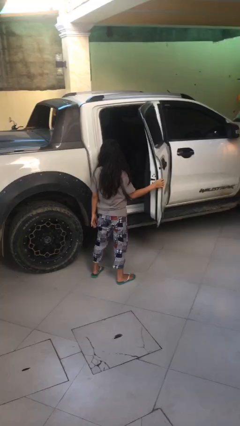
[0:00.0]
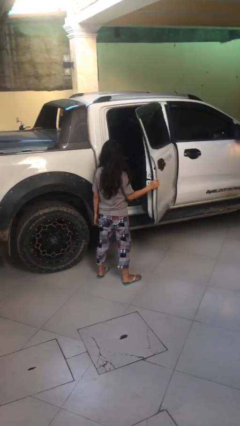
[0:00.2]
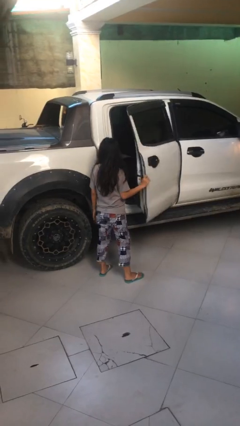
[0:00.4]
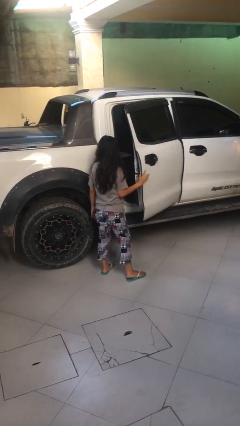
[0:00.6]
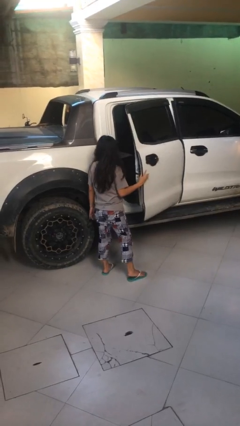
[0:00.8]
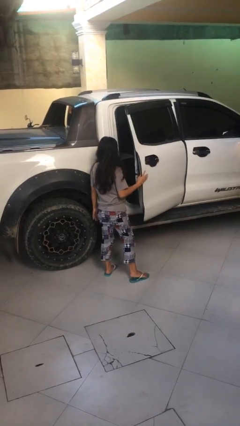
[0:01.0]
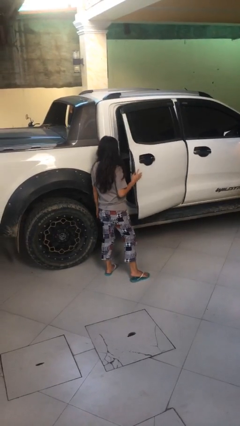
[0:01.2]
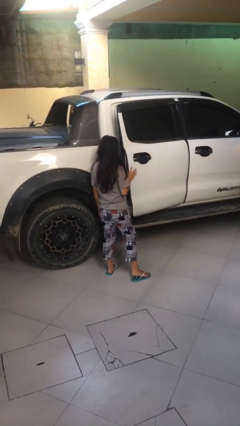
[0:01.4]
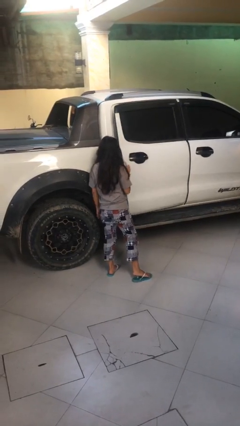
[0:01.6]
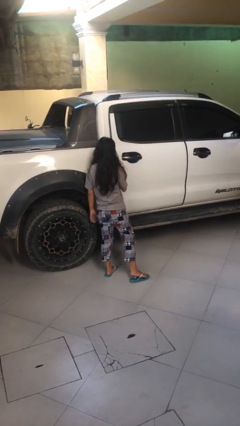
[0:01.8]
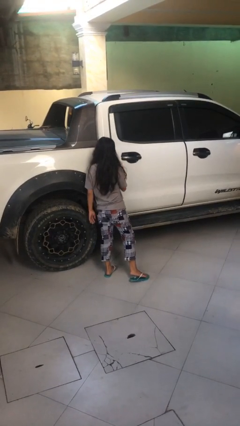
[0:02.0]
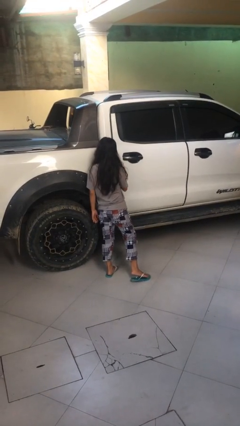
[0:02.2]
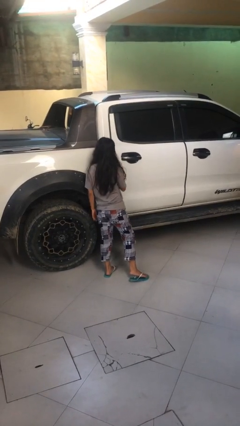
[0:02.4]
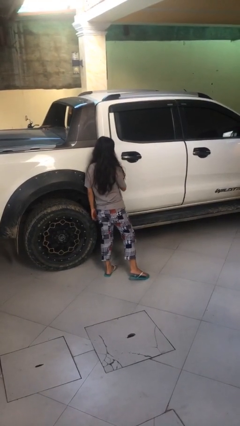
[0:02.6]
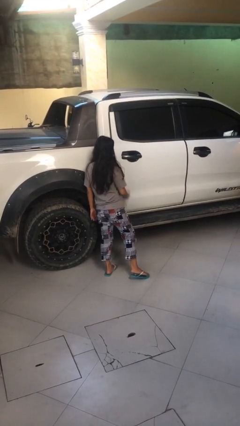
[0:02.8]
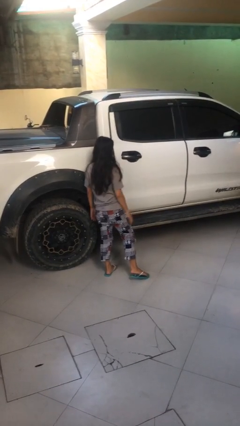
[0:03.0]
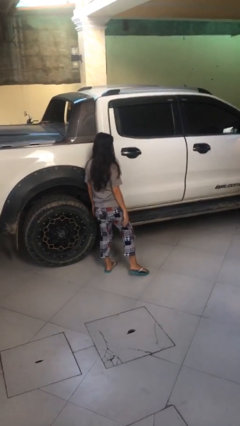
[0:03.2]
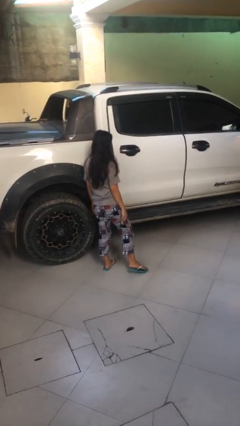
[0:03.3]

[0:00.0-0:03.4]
person closes car door

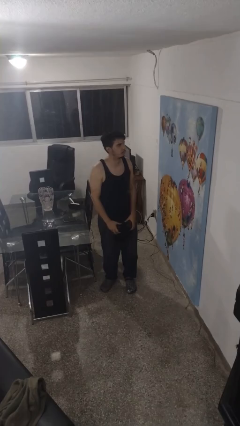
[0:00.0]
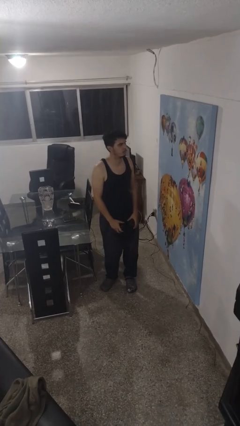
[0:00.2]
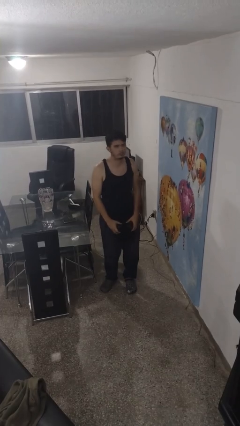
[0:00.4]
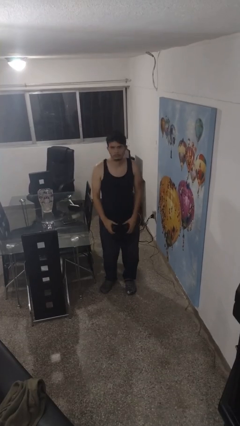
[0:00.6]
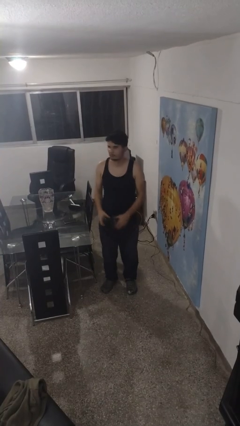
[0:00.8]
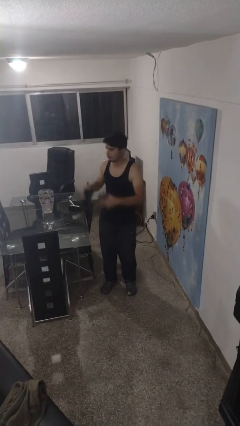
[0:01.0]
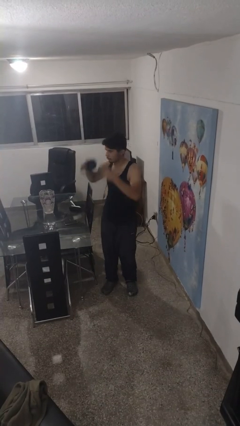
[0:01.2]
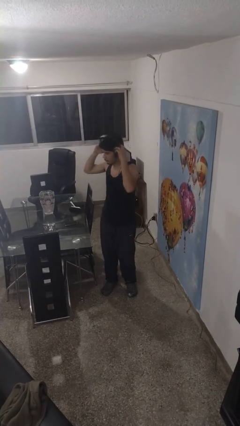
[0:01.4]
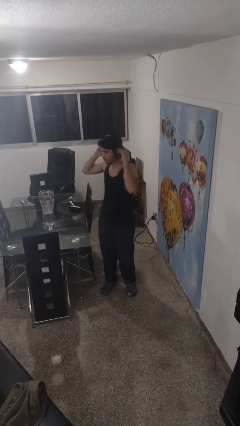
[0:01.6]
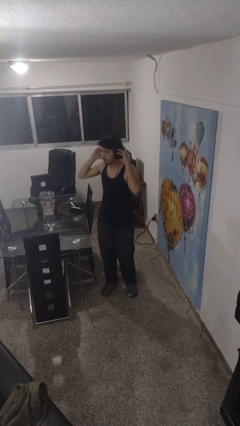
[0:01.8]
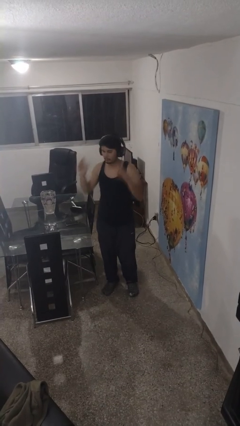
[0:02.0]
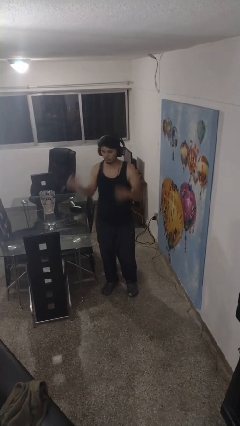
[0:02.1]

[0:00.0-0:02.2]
person puts on headphones

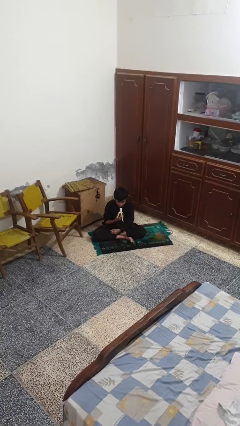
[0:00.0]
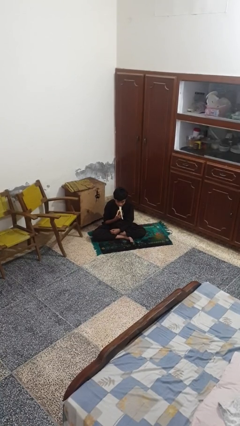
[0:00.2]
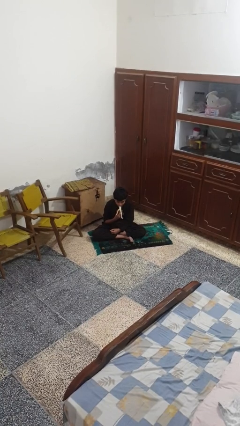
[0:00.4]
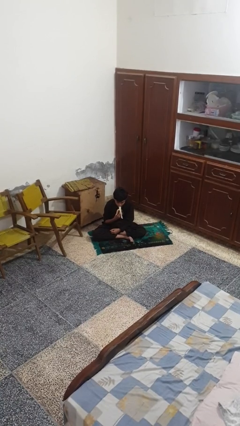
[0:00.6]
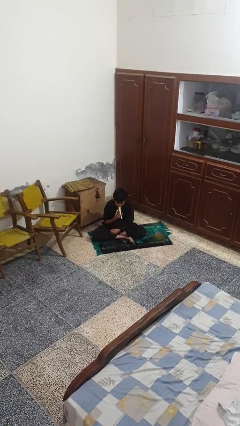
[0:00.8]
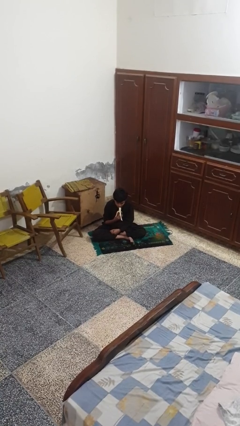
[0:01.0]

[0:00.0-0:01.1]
person eats banana

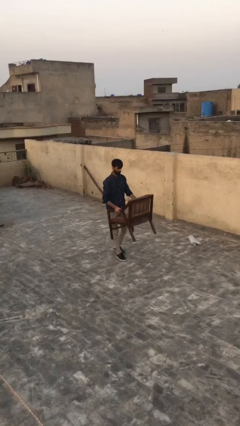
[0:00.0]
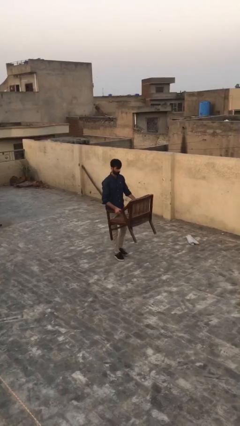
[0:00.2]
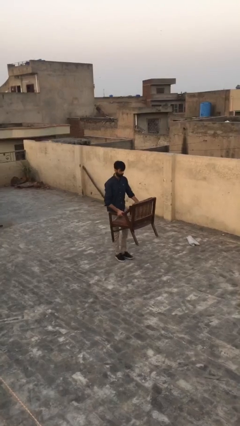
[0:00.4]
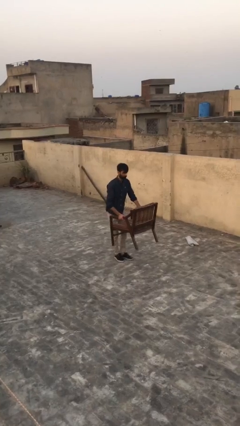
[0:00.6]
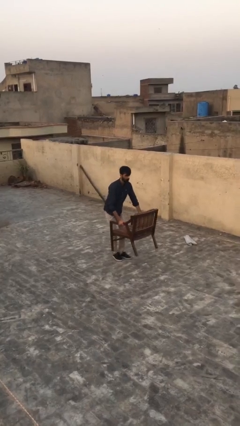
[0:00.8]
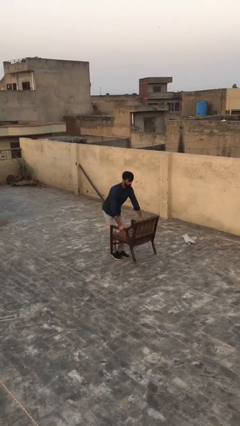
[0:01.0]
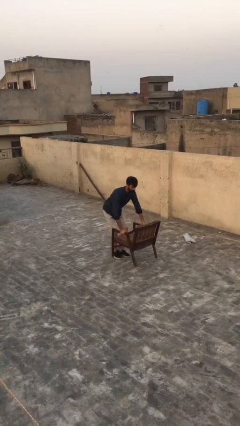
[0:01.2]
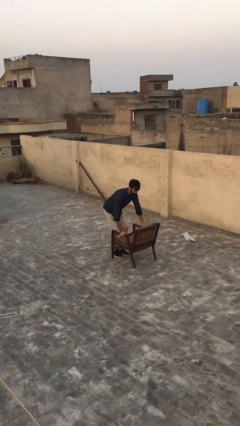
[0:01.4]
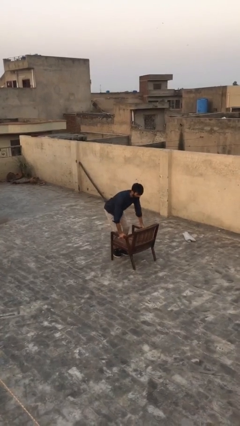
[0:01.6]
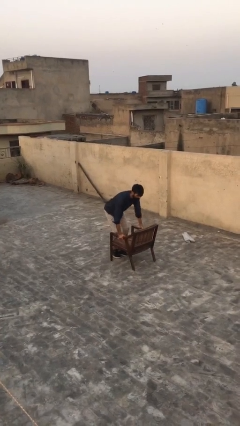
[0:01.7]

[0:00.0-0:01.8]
person puts down object on floor

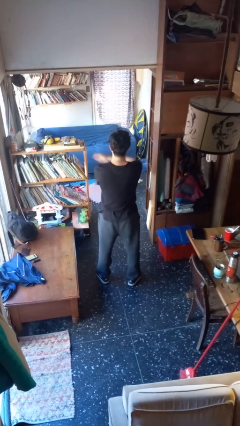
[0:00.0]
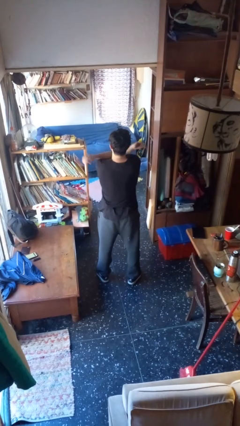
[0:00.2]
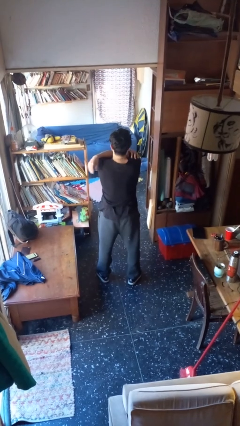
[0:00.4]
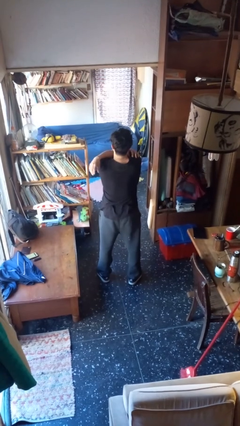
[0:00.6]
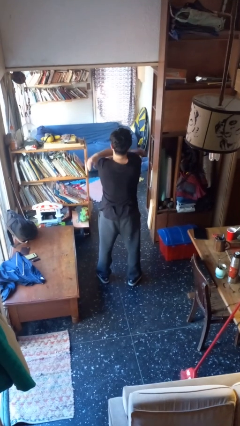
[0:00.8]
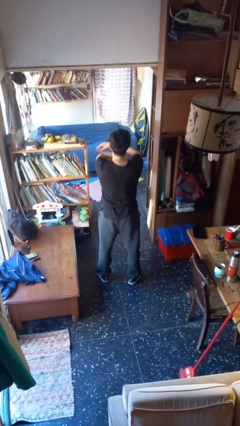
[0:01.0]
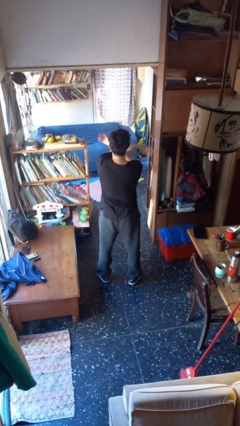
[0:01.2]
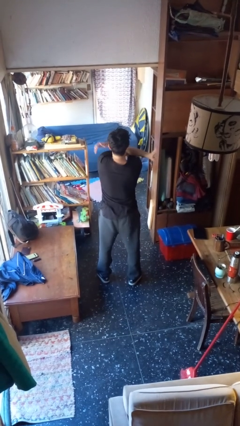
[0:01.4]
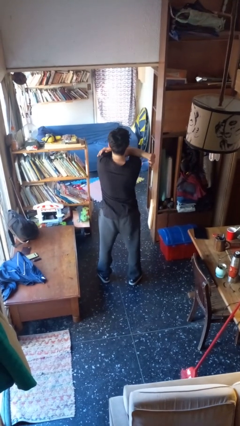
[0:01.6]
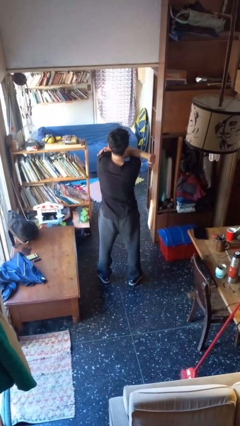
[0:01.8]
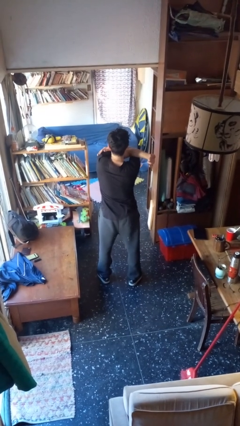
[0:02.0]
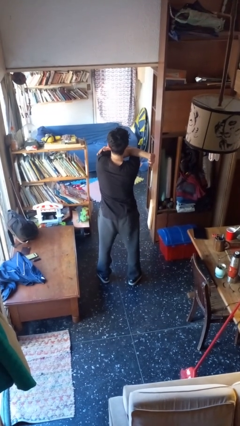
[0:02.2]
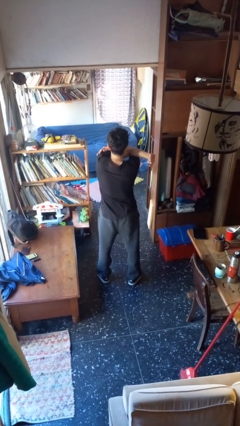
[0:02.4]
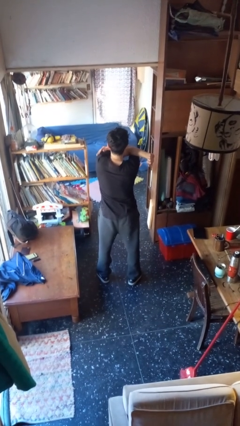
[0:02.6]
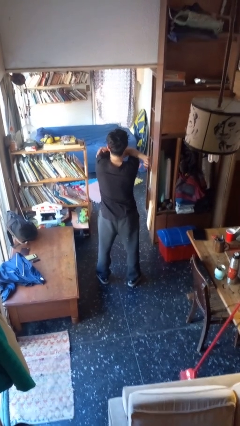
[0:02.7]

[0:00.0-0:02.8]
person stretches arms to side

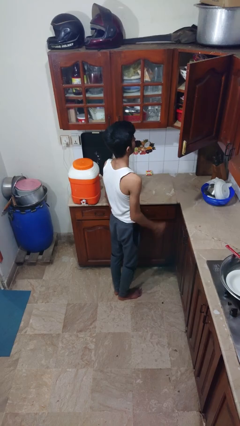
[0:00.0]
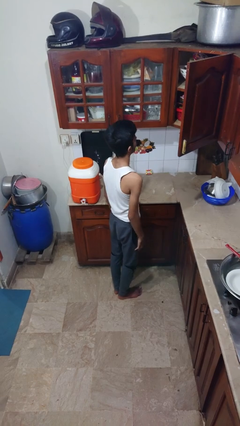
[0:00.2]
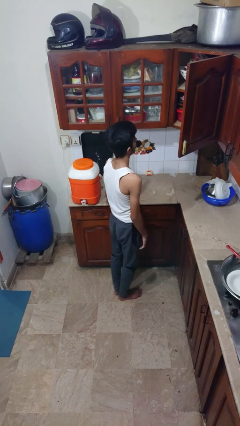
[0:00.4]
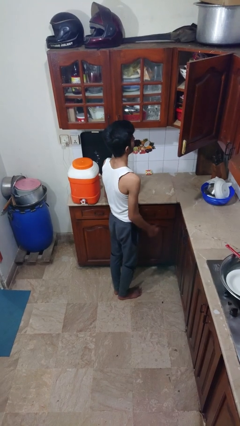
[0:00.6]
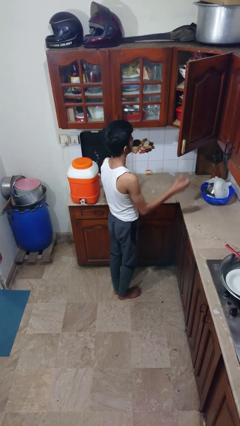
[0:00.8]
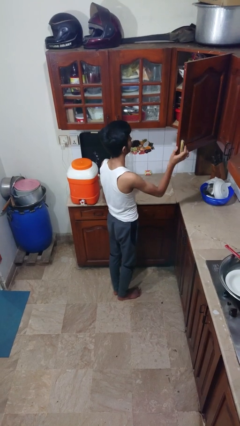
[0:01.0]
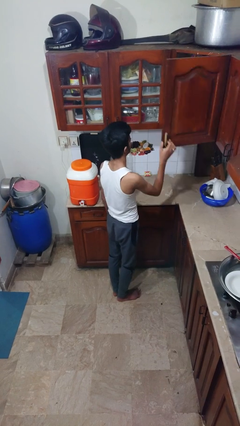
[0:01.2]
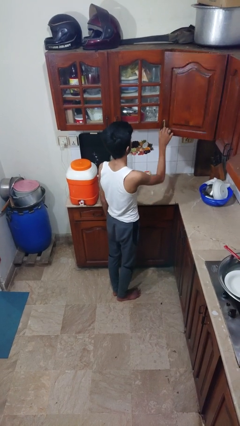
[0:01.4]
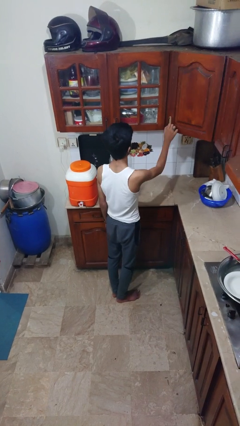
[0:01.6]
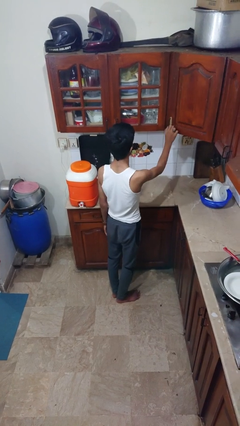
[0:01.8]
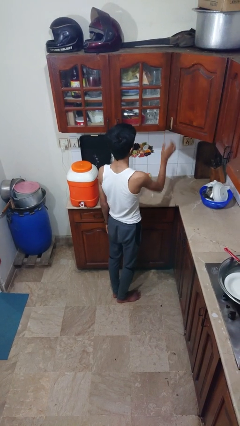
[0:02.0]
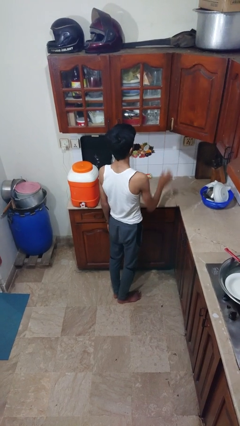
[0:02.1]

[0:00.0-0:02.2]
person closes cabinet

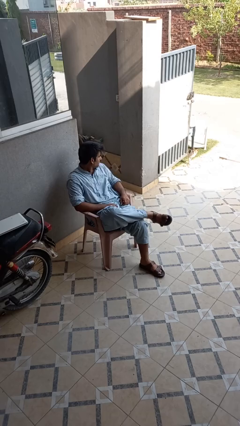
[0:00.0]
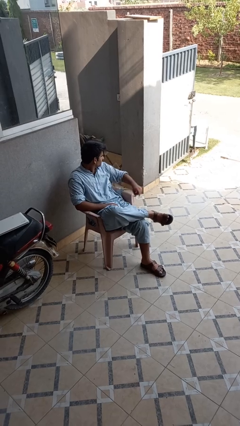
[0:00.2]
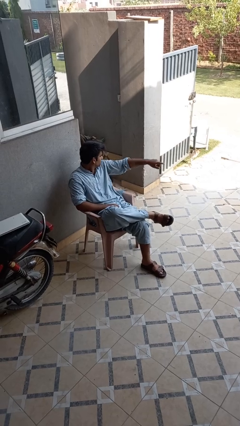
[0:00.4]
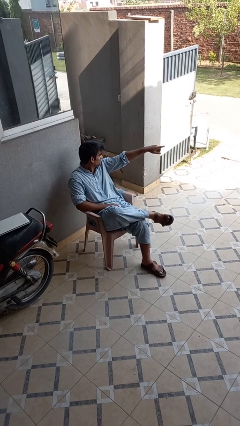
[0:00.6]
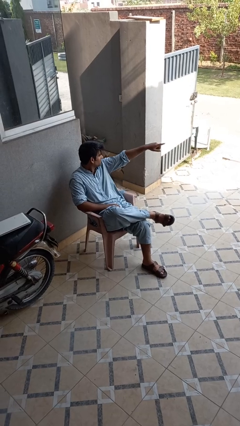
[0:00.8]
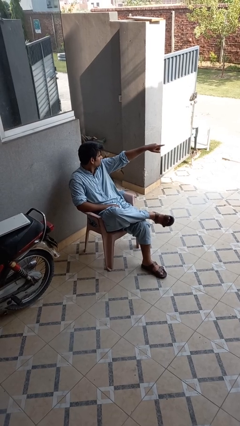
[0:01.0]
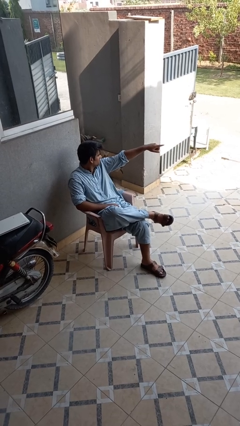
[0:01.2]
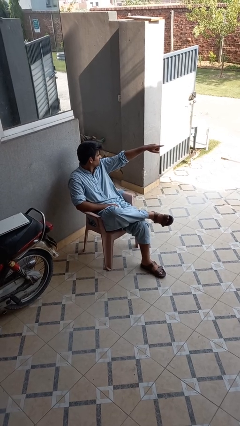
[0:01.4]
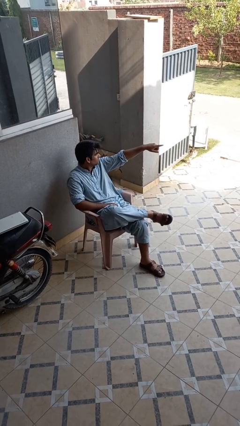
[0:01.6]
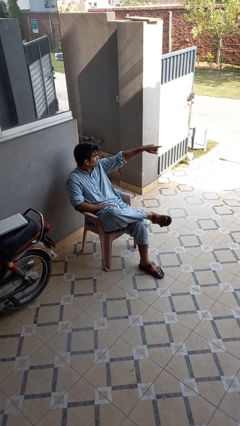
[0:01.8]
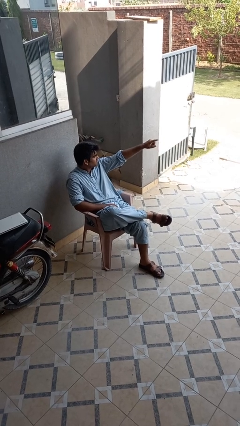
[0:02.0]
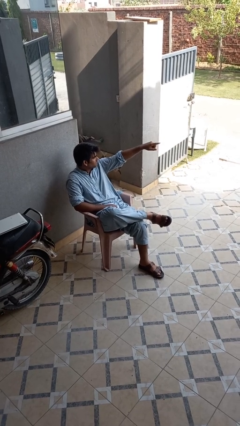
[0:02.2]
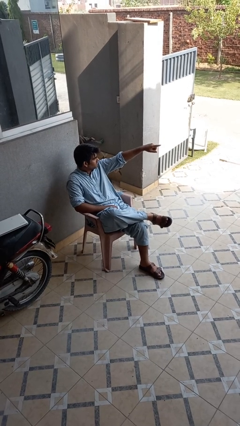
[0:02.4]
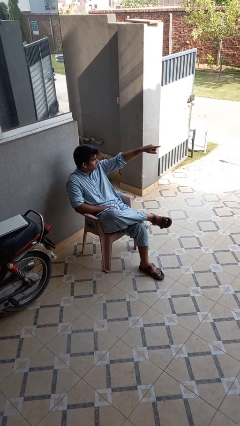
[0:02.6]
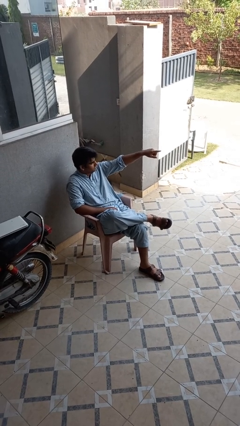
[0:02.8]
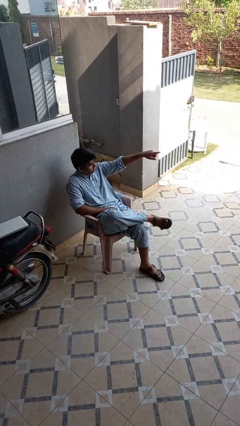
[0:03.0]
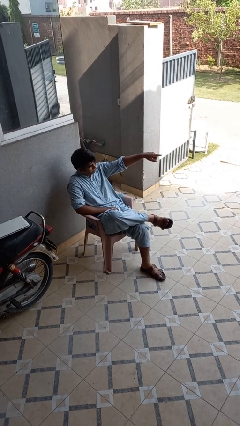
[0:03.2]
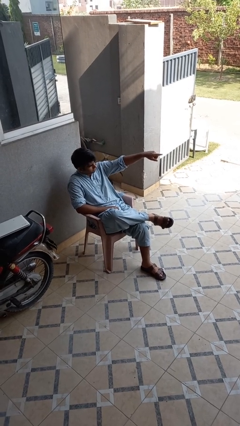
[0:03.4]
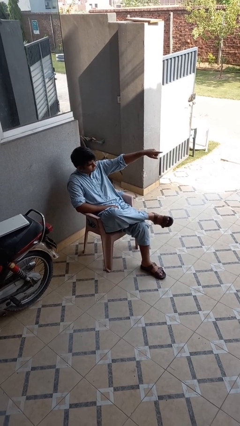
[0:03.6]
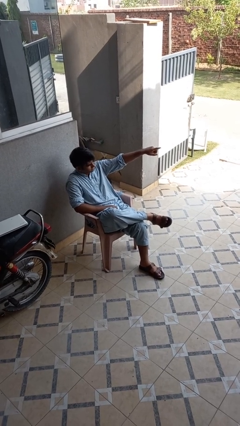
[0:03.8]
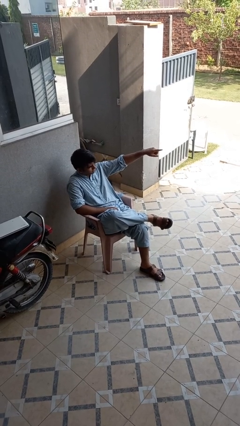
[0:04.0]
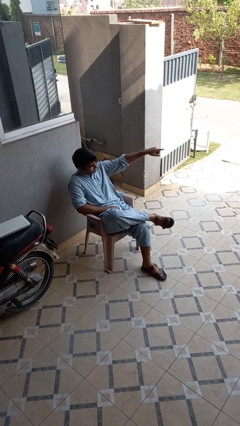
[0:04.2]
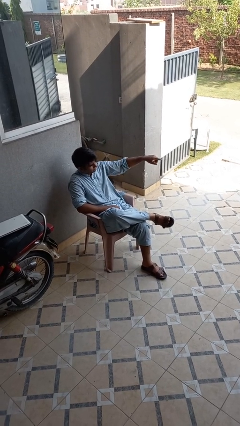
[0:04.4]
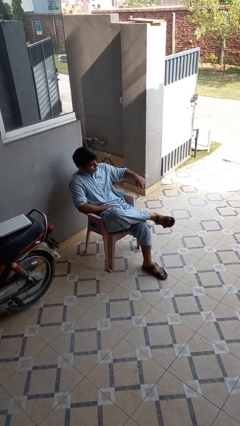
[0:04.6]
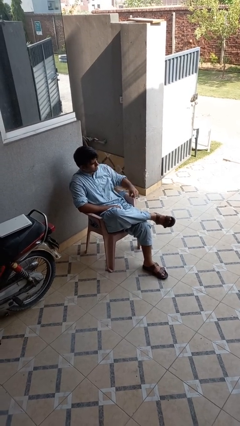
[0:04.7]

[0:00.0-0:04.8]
person points at person
